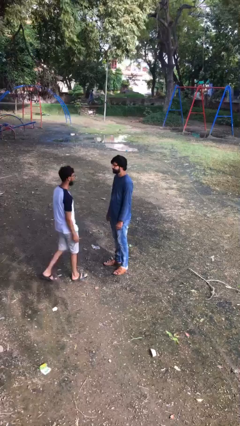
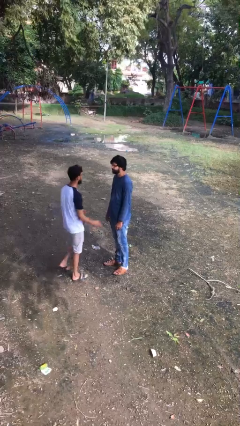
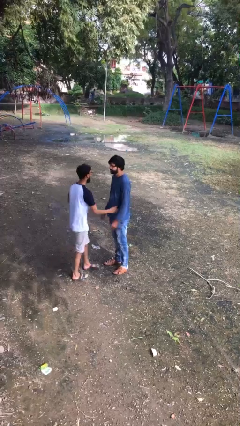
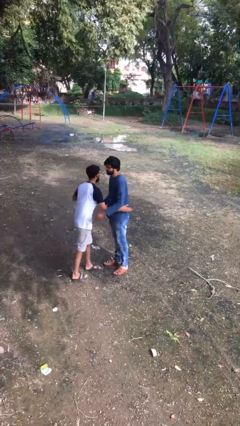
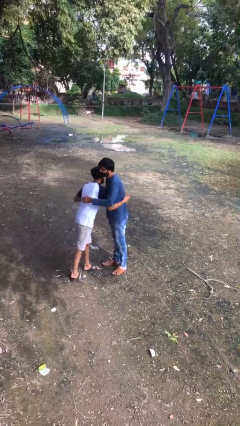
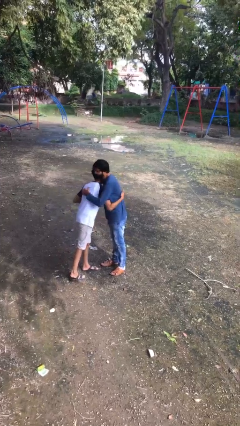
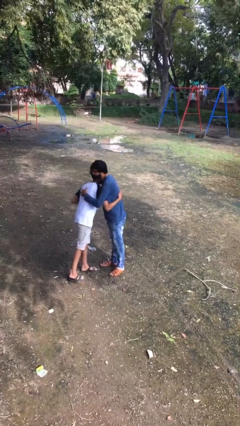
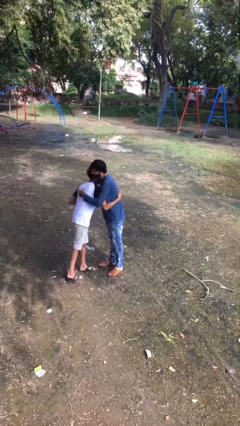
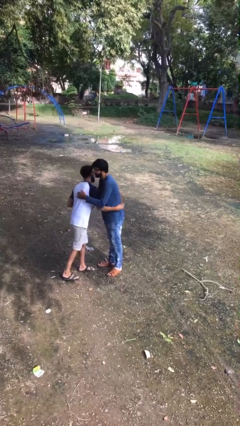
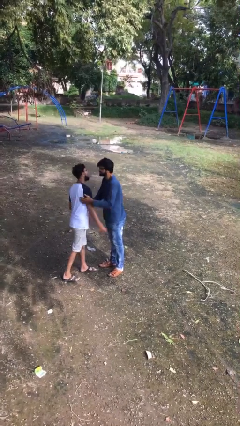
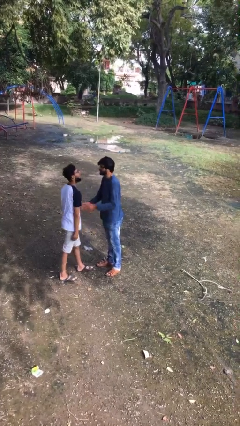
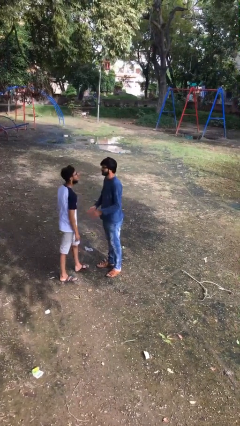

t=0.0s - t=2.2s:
person embraces person

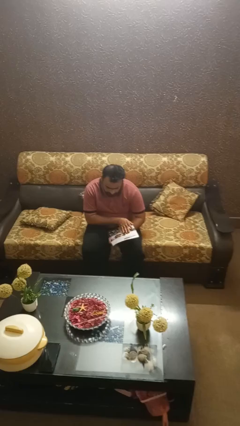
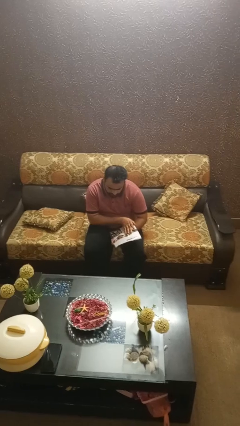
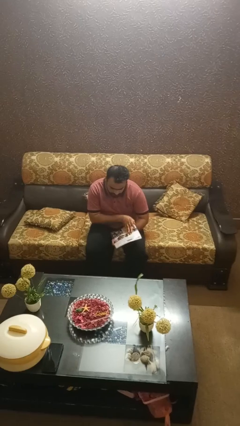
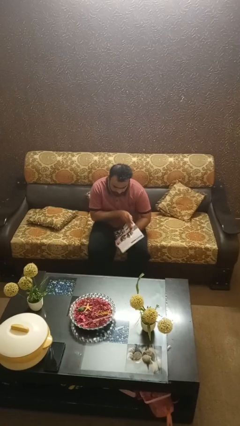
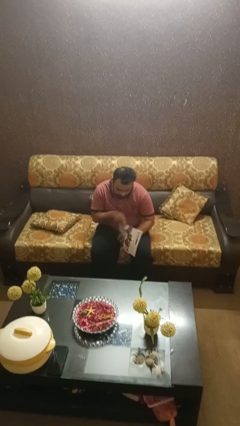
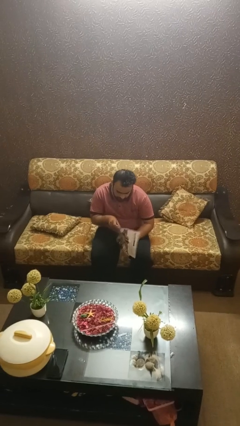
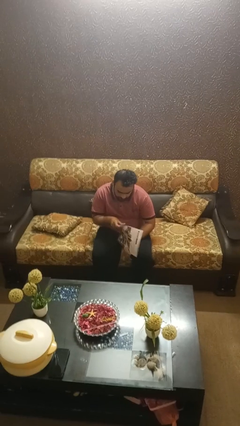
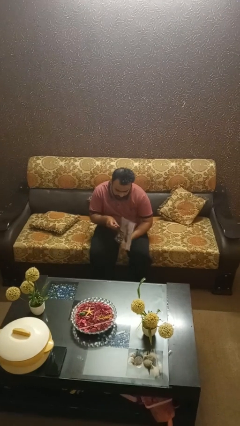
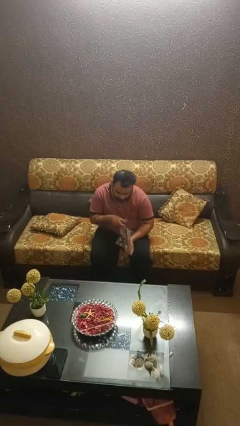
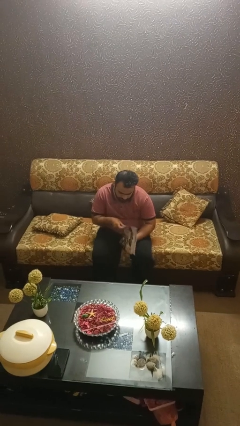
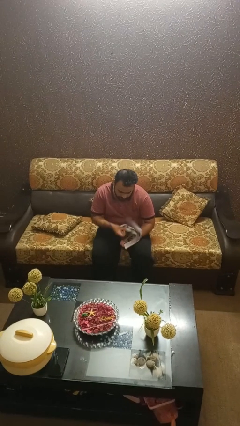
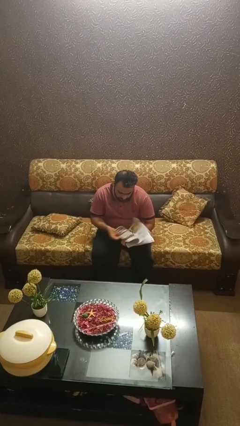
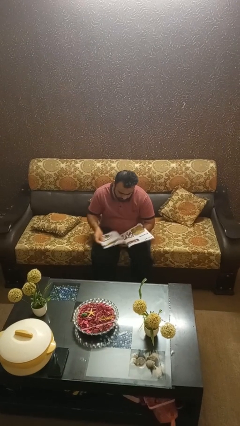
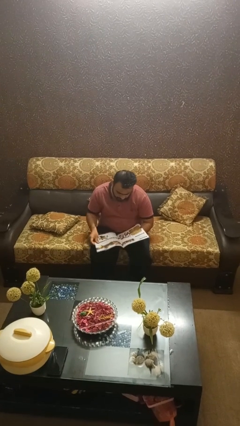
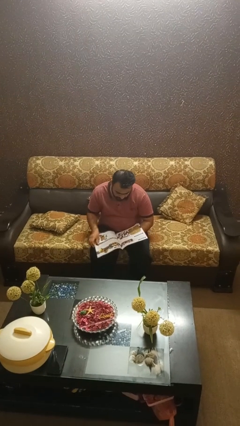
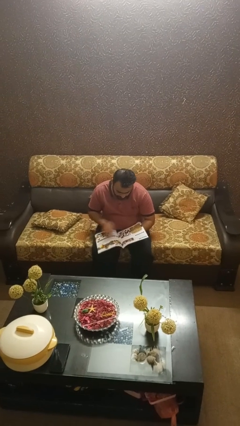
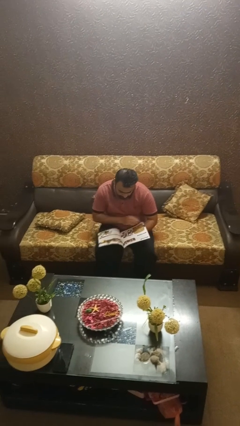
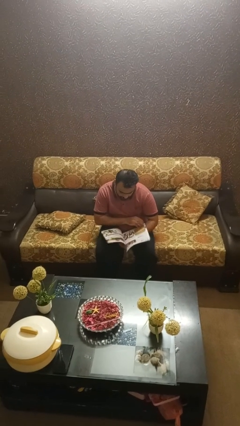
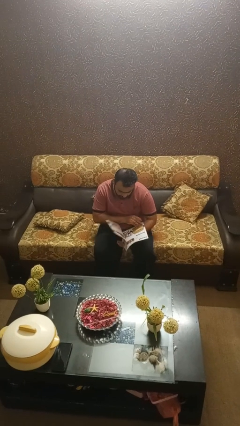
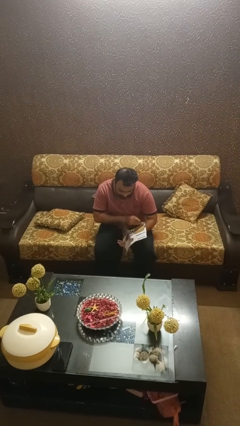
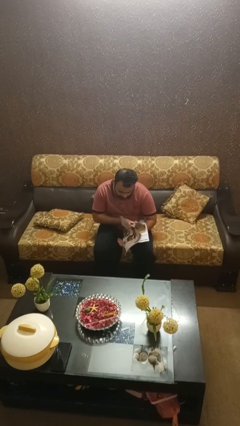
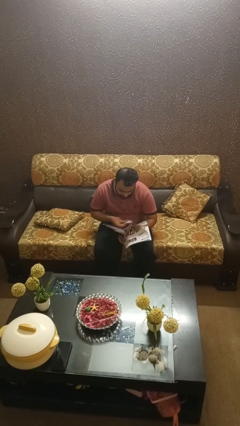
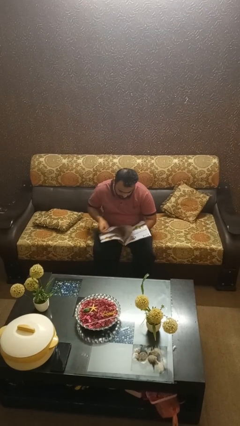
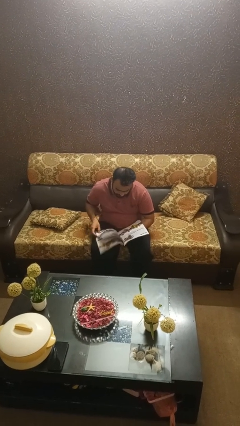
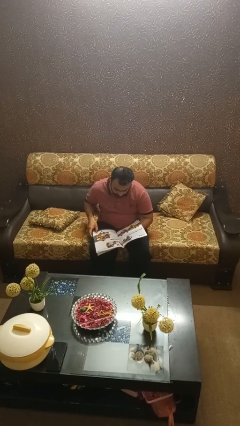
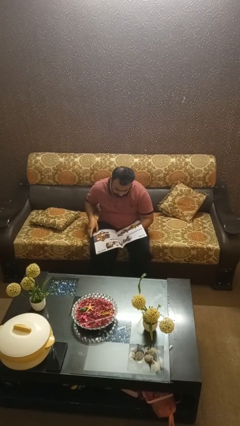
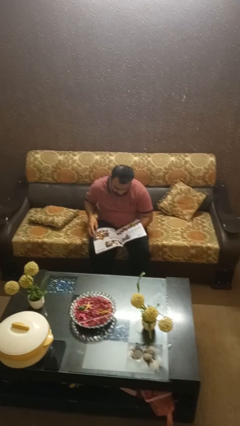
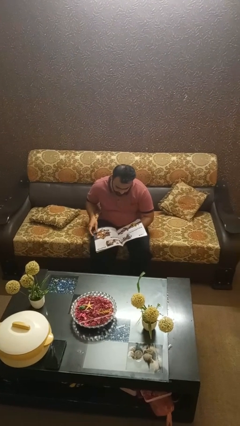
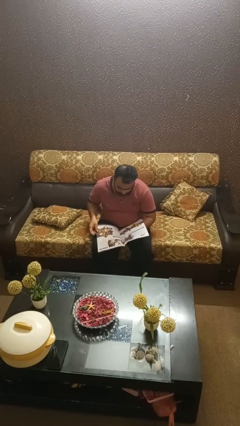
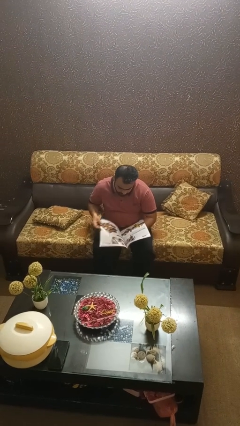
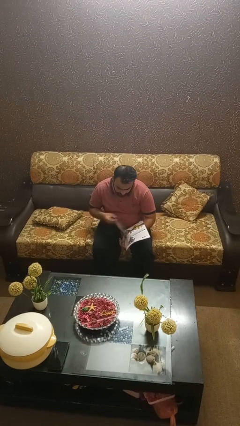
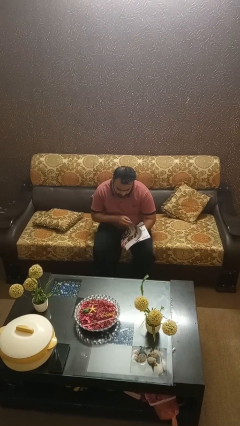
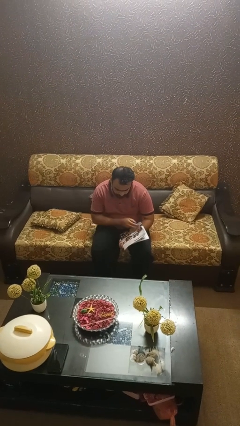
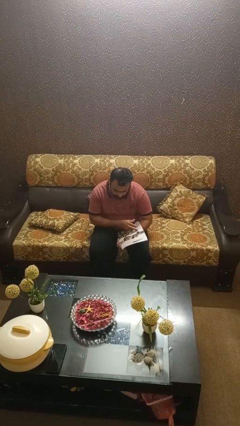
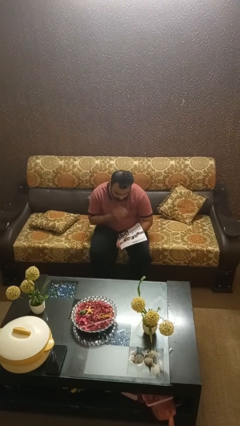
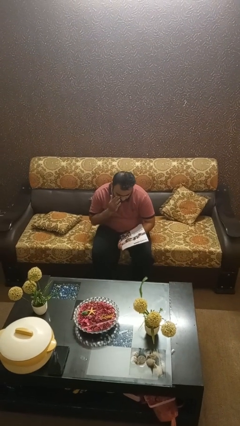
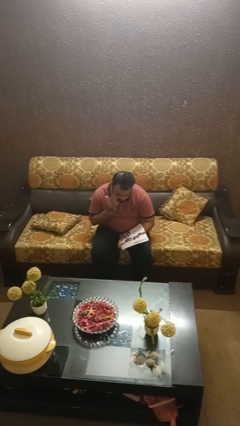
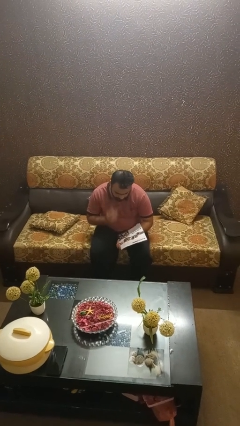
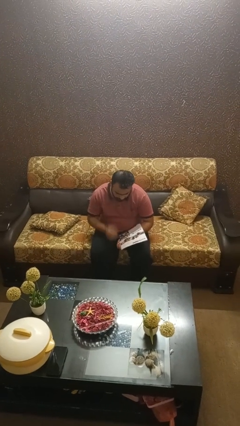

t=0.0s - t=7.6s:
person reads magazine

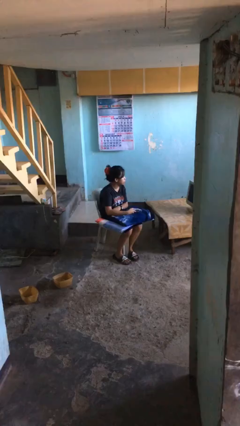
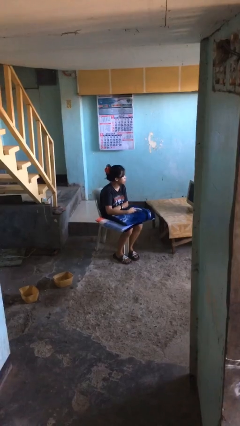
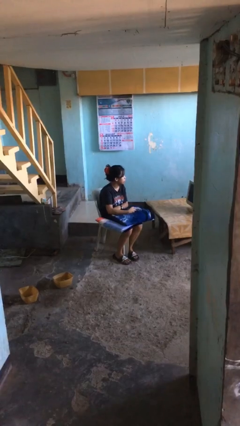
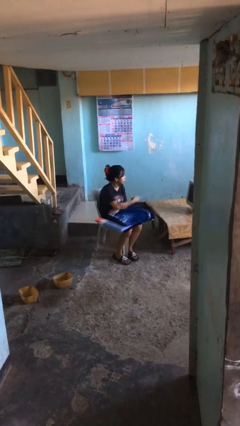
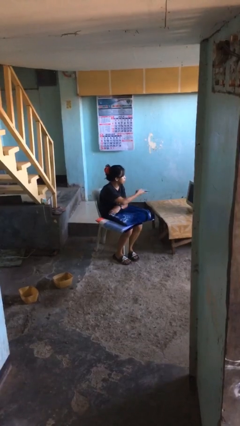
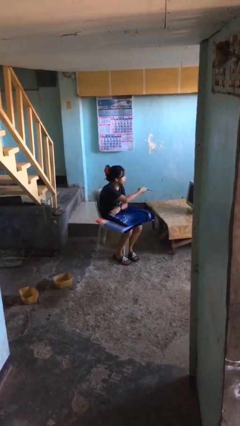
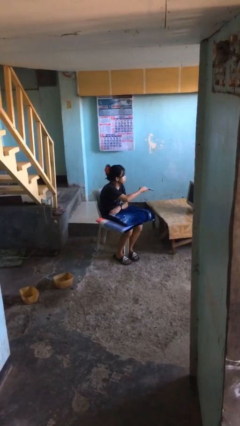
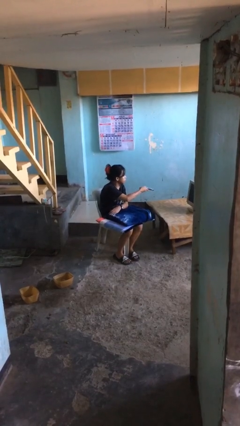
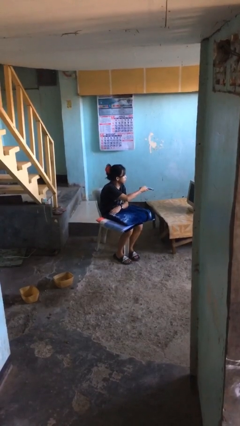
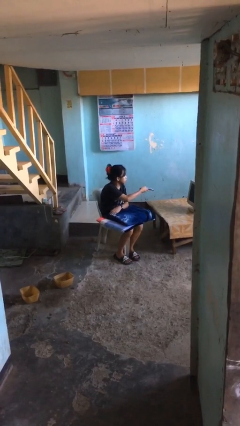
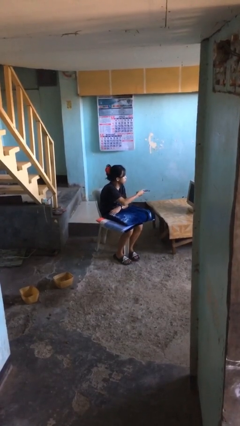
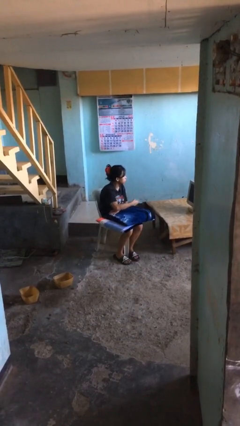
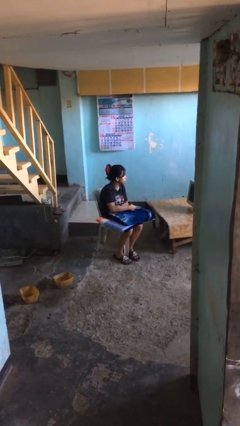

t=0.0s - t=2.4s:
person uses television remote

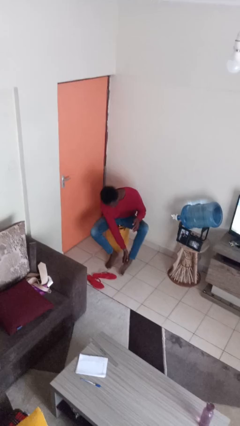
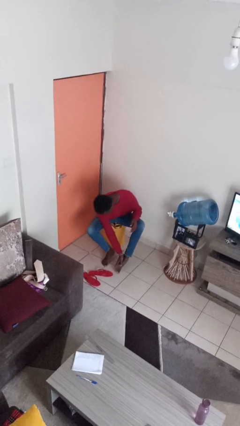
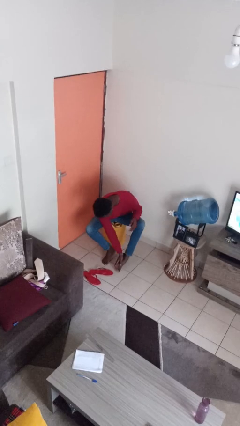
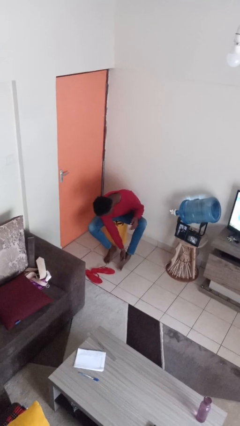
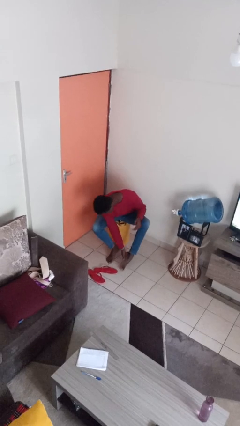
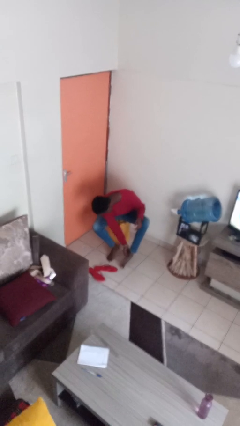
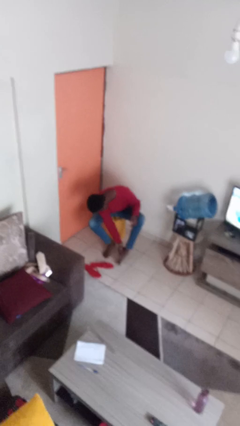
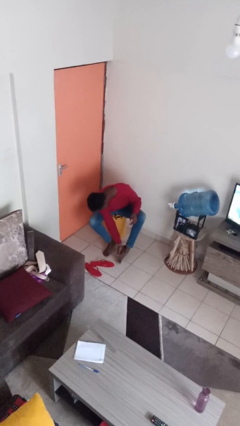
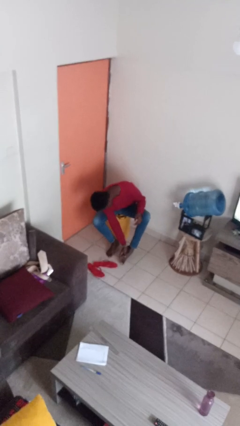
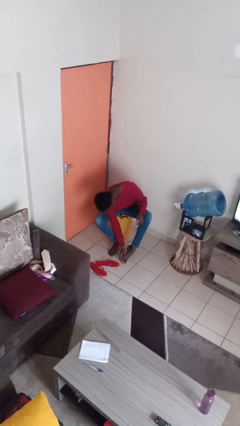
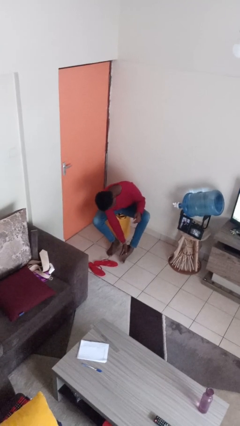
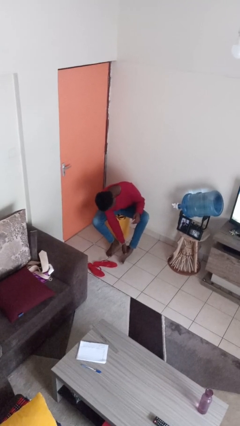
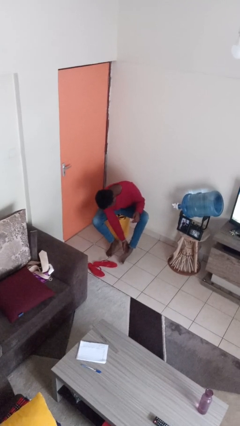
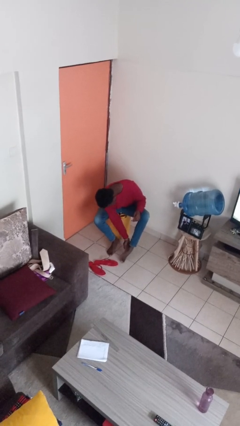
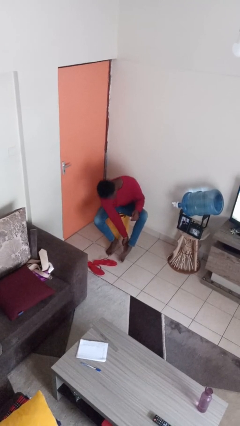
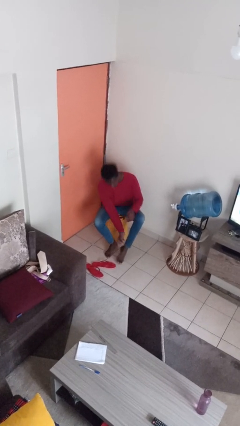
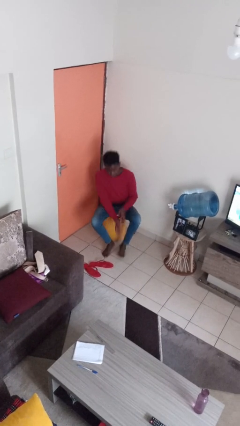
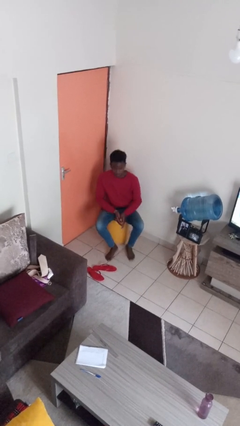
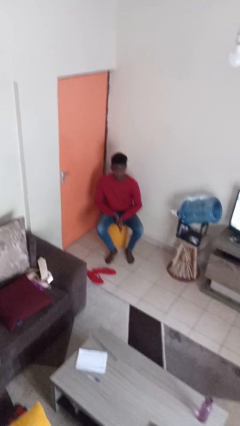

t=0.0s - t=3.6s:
person rubs foot

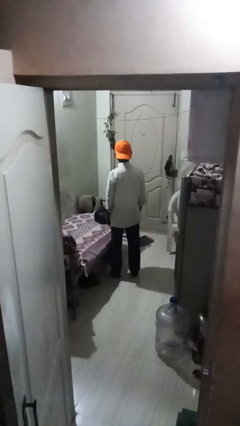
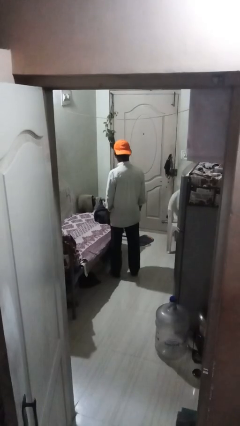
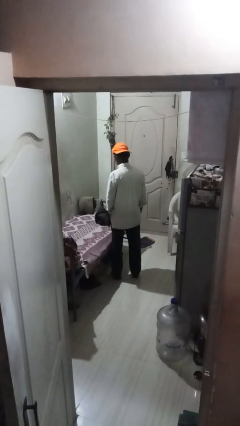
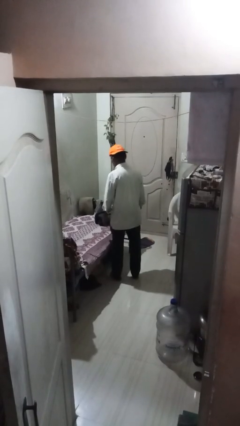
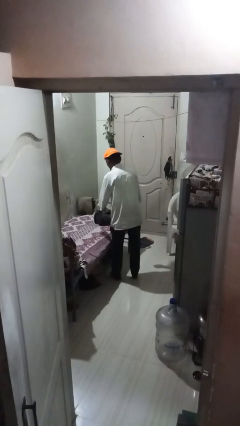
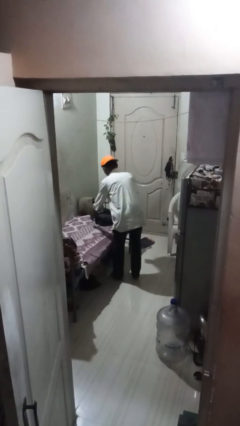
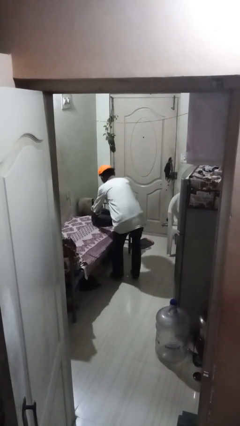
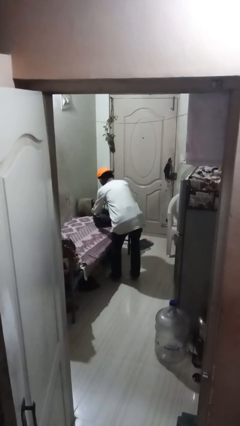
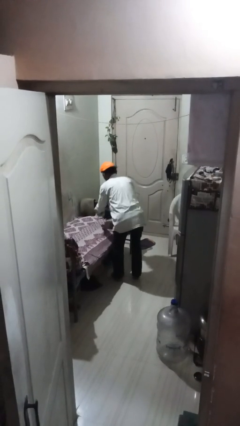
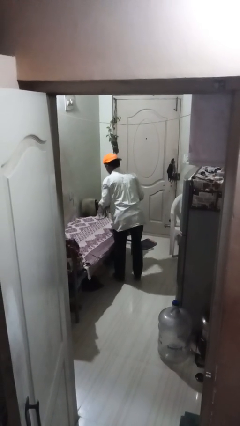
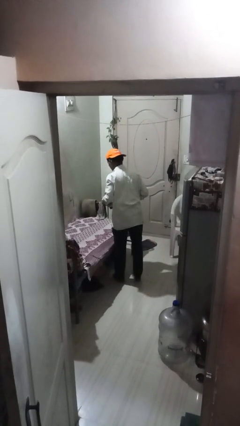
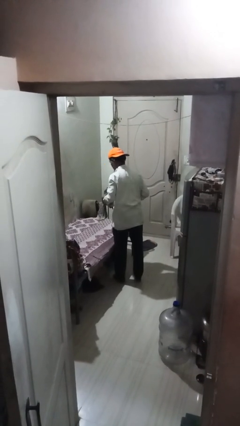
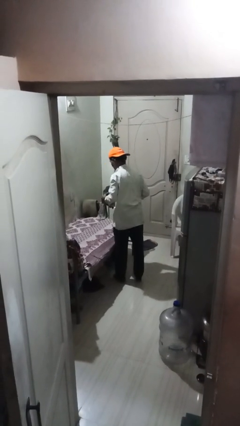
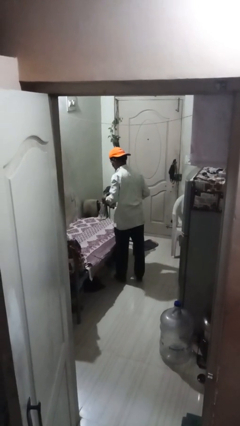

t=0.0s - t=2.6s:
person picks up object from bed
